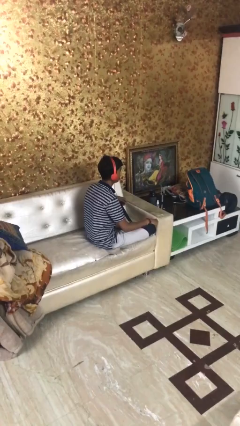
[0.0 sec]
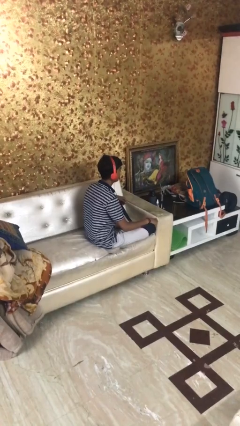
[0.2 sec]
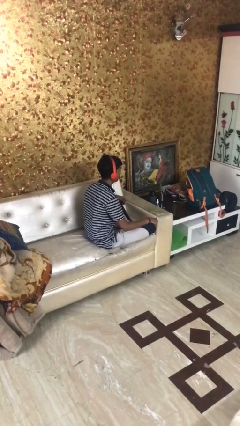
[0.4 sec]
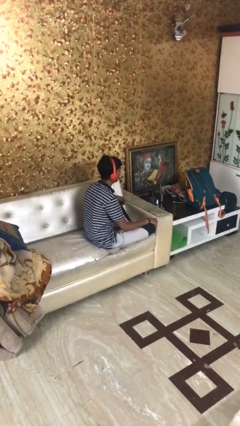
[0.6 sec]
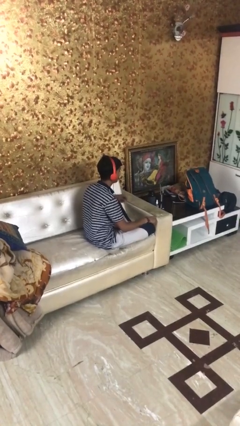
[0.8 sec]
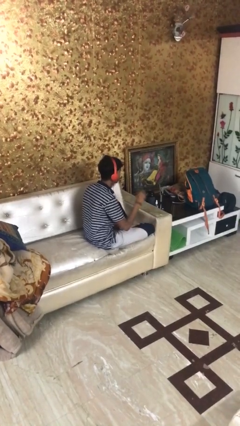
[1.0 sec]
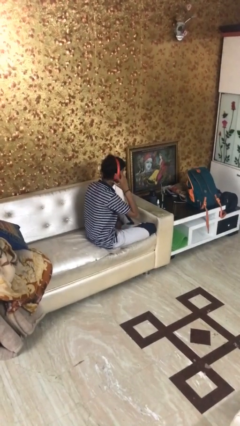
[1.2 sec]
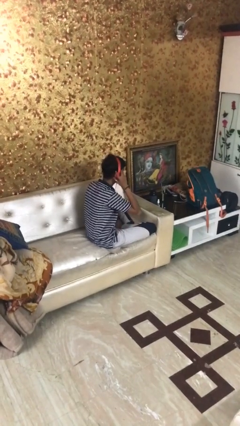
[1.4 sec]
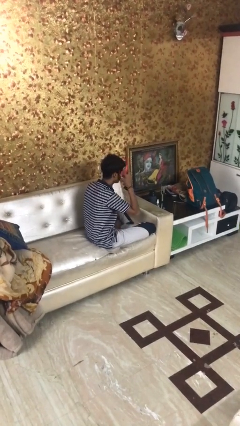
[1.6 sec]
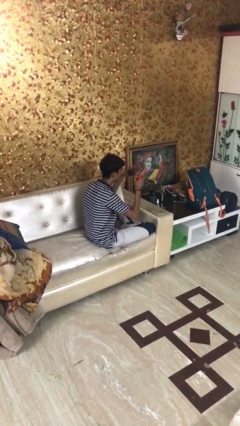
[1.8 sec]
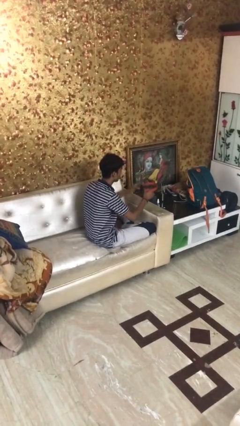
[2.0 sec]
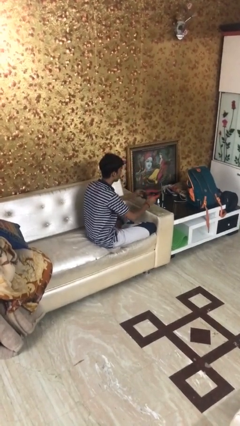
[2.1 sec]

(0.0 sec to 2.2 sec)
person takes off headphones

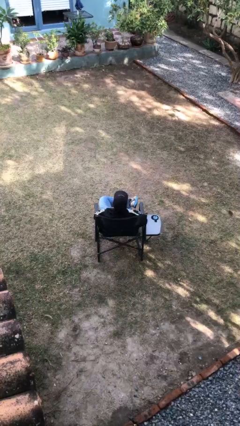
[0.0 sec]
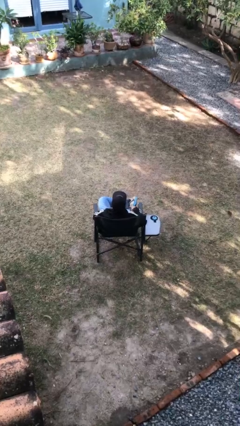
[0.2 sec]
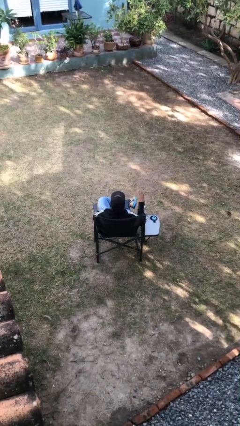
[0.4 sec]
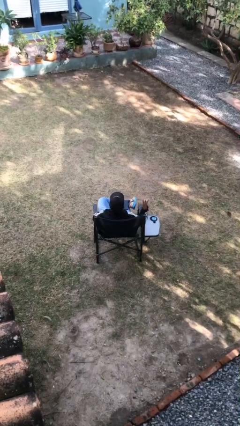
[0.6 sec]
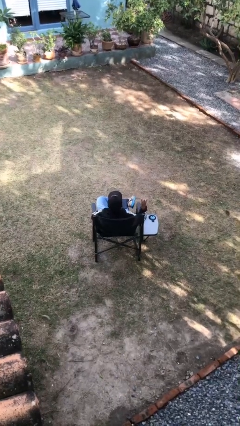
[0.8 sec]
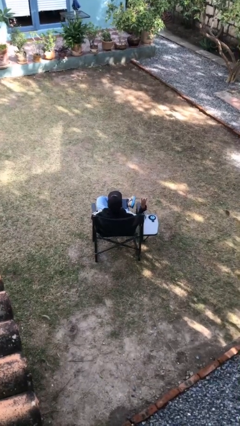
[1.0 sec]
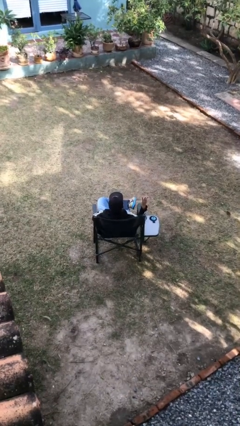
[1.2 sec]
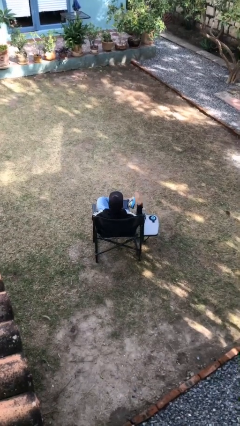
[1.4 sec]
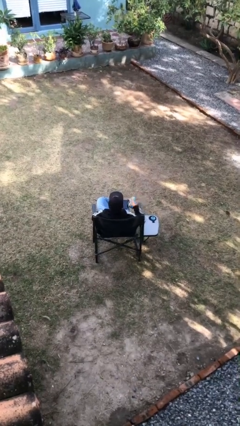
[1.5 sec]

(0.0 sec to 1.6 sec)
person gestures number three

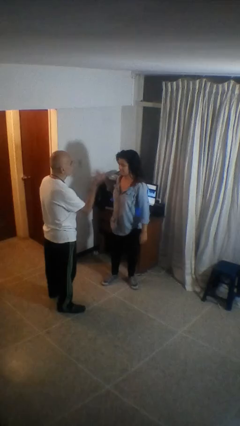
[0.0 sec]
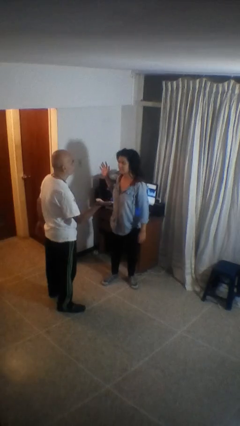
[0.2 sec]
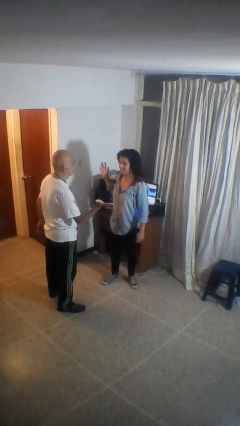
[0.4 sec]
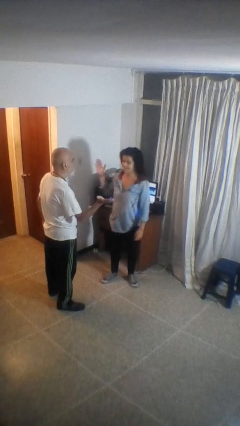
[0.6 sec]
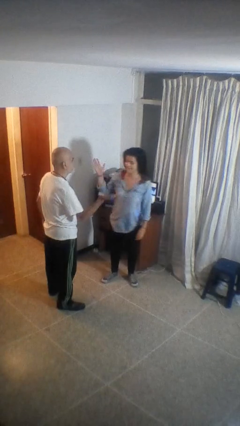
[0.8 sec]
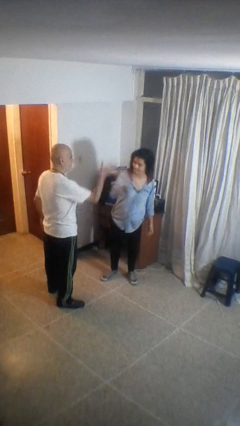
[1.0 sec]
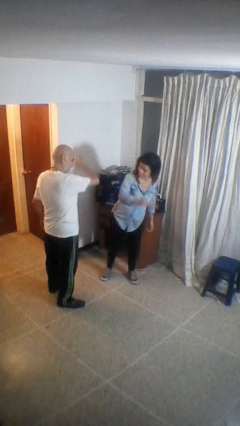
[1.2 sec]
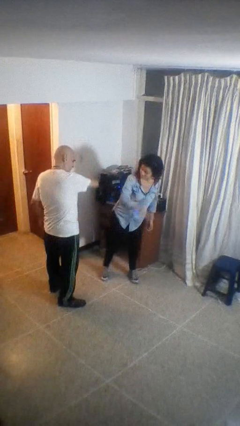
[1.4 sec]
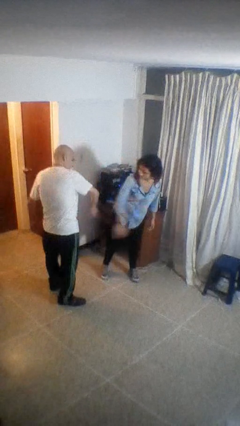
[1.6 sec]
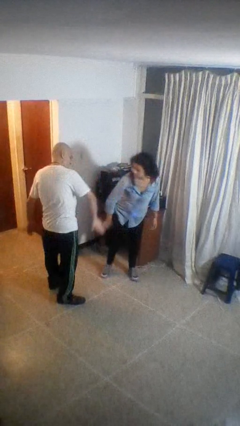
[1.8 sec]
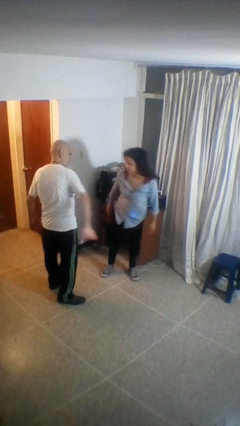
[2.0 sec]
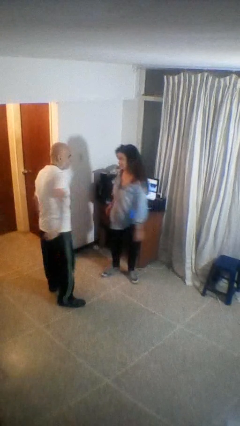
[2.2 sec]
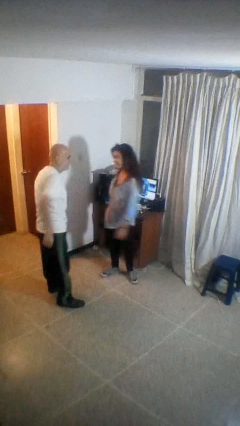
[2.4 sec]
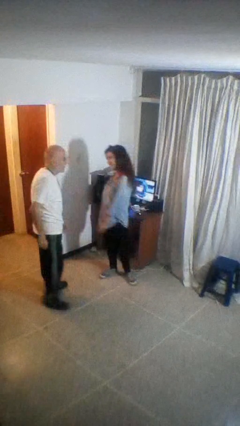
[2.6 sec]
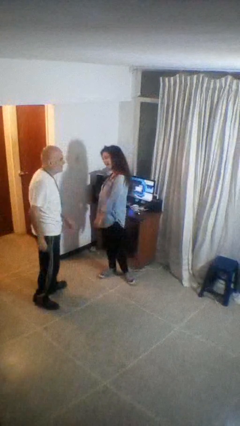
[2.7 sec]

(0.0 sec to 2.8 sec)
person highfives hand

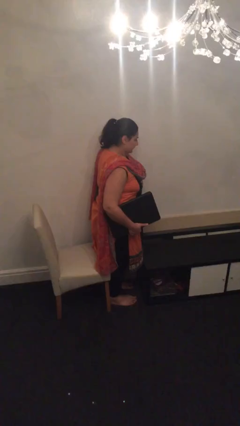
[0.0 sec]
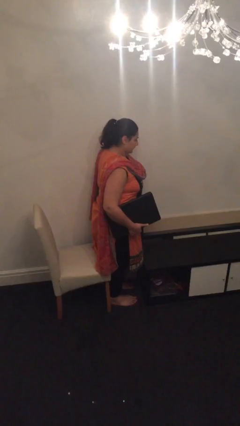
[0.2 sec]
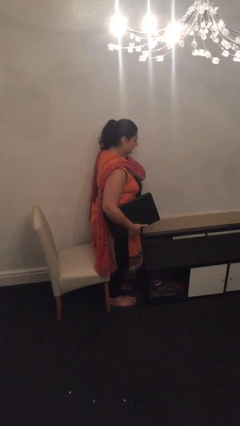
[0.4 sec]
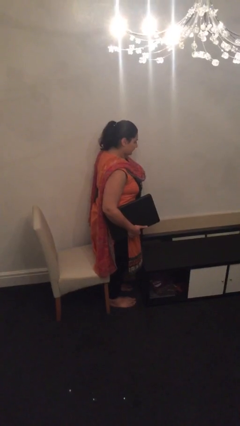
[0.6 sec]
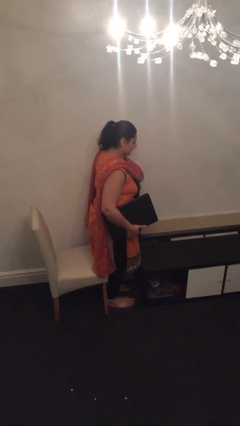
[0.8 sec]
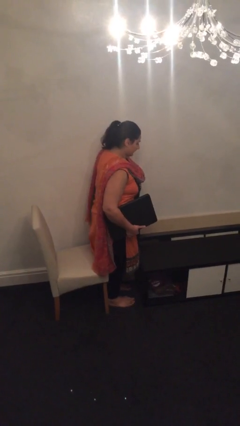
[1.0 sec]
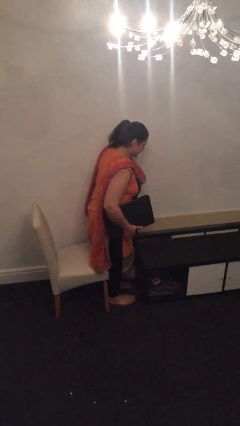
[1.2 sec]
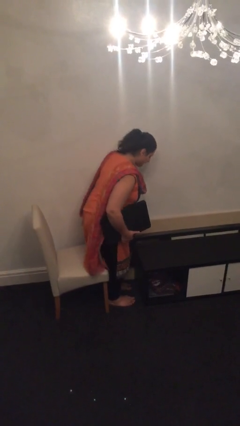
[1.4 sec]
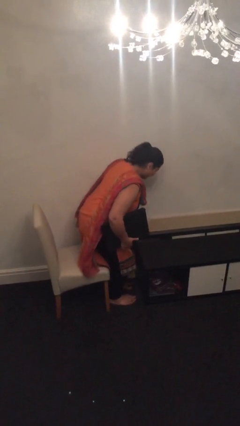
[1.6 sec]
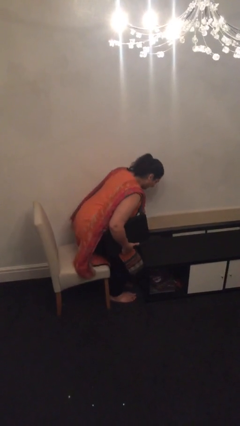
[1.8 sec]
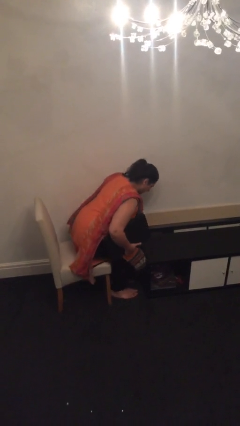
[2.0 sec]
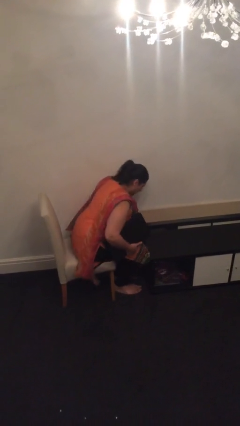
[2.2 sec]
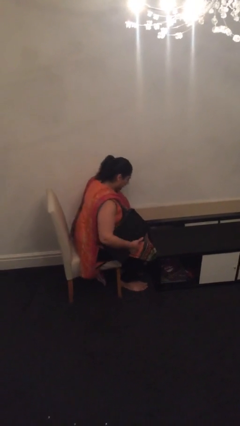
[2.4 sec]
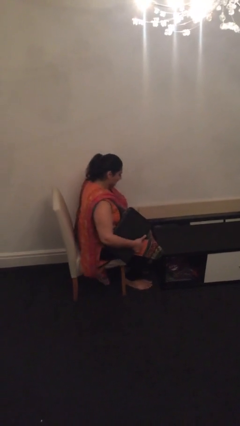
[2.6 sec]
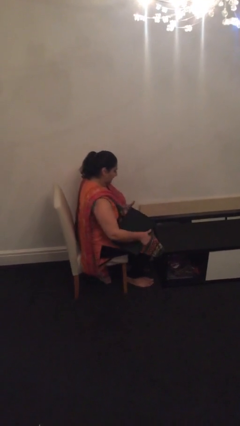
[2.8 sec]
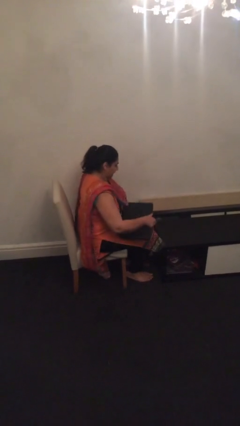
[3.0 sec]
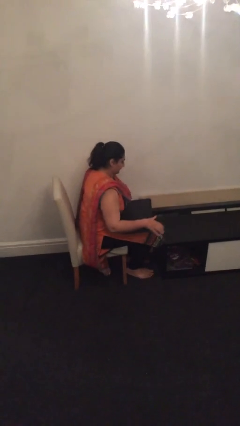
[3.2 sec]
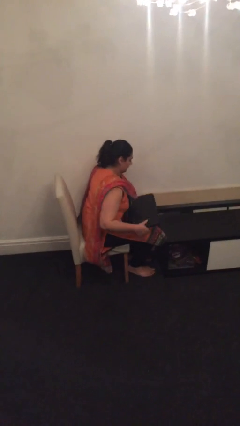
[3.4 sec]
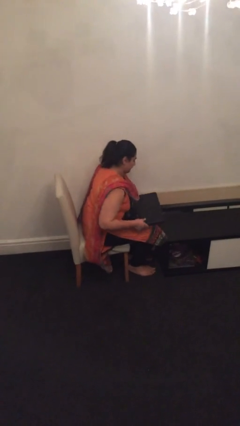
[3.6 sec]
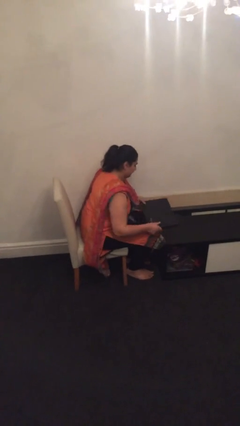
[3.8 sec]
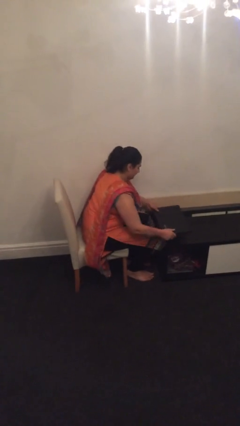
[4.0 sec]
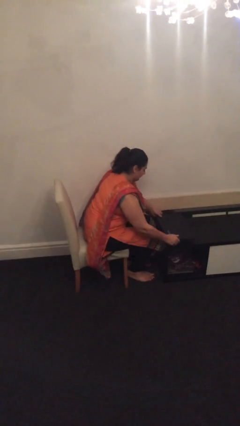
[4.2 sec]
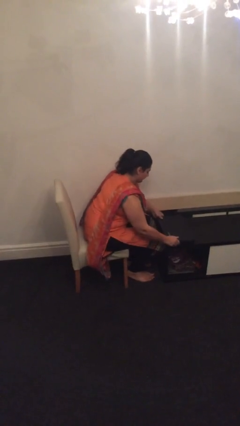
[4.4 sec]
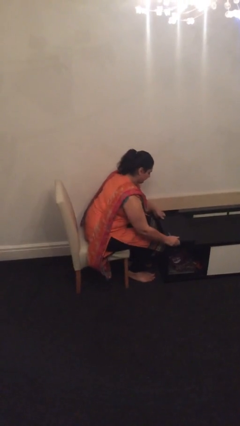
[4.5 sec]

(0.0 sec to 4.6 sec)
person sits down

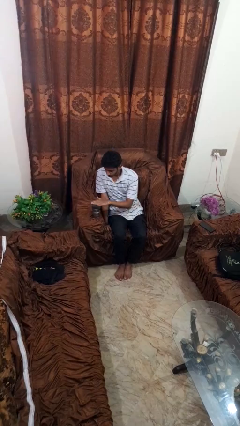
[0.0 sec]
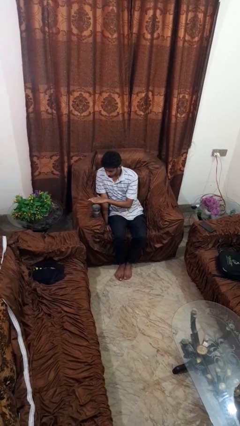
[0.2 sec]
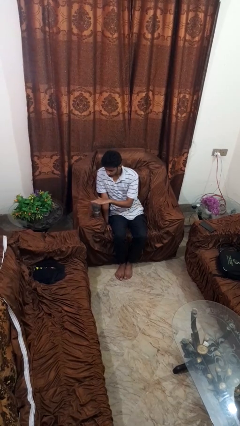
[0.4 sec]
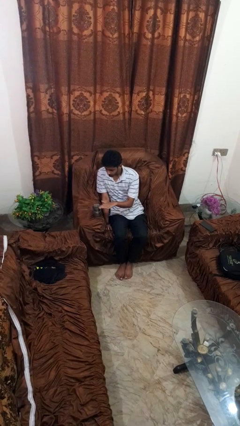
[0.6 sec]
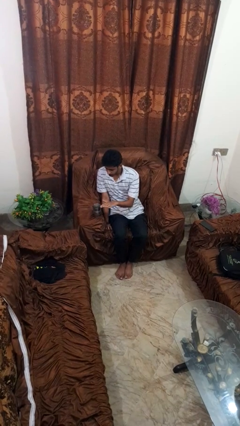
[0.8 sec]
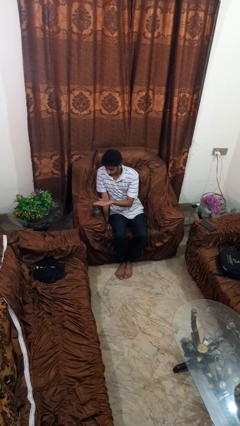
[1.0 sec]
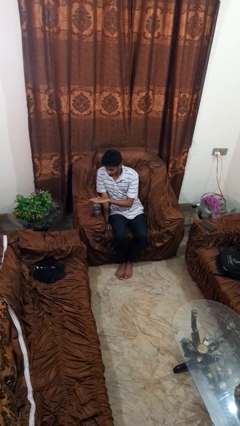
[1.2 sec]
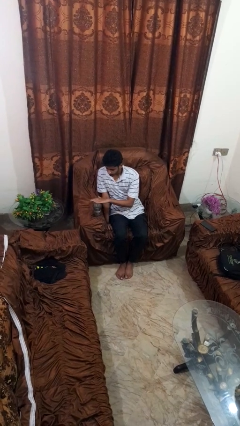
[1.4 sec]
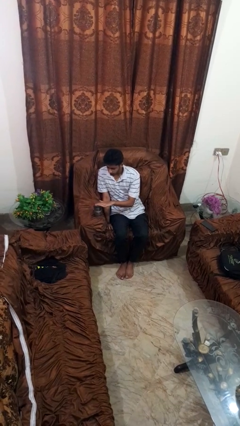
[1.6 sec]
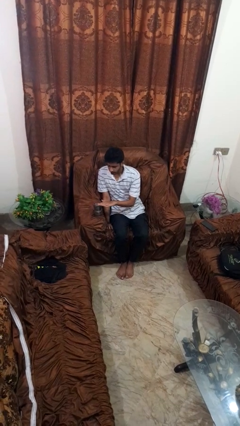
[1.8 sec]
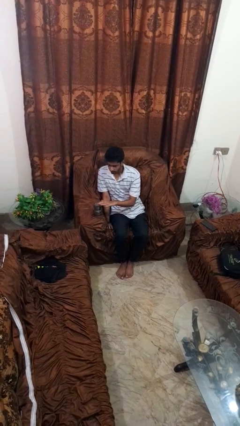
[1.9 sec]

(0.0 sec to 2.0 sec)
person waves hand over object

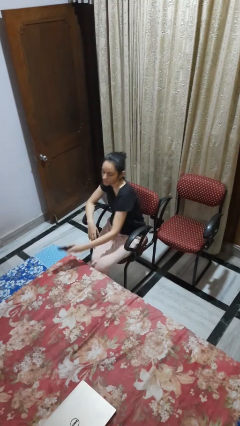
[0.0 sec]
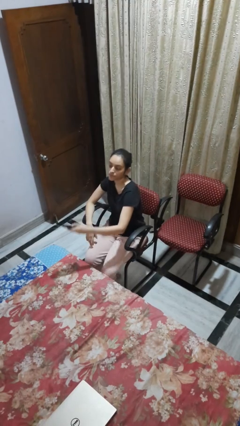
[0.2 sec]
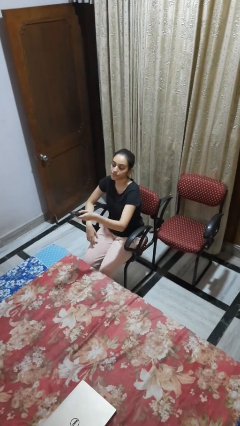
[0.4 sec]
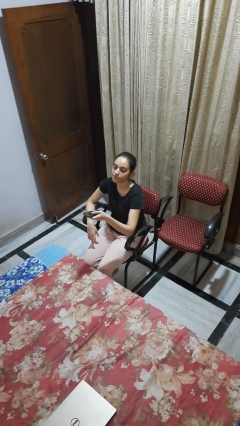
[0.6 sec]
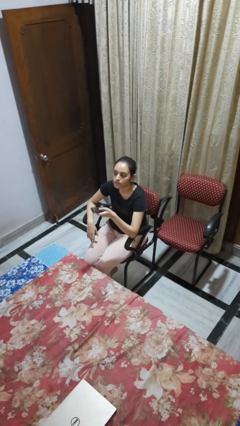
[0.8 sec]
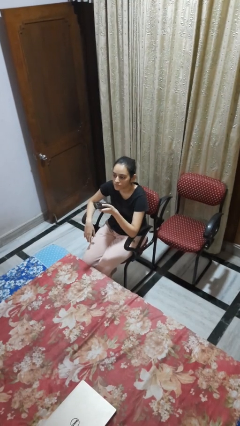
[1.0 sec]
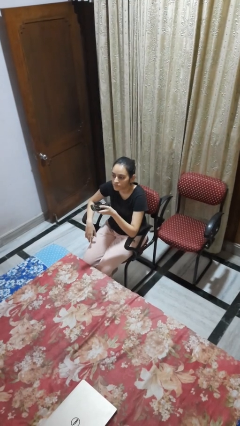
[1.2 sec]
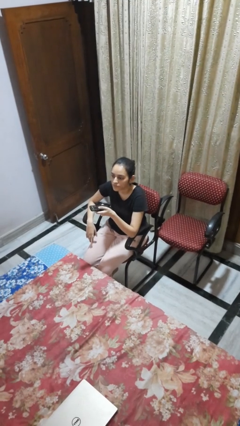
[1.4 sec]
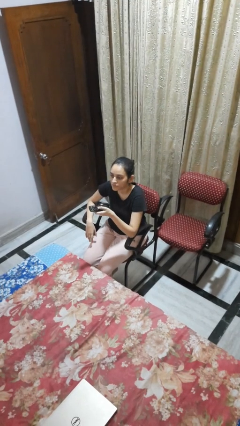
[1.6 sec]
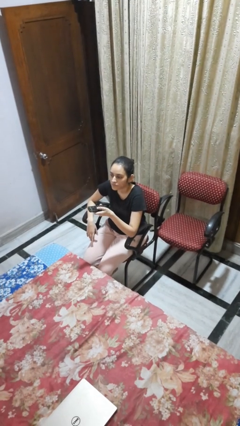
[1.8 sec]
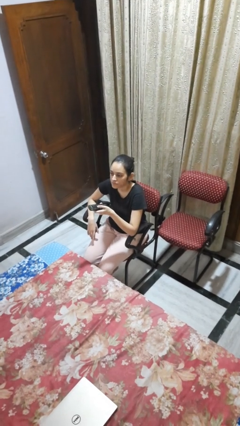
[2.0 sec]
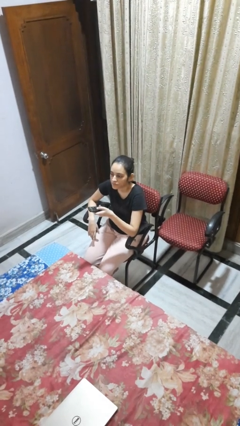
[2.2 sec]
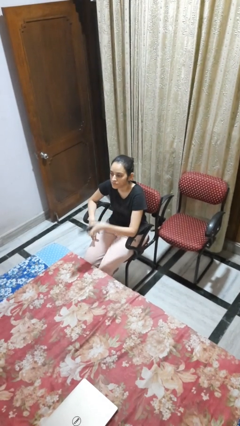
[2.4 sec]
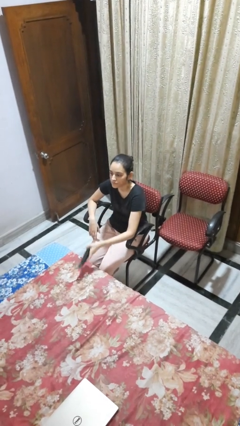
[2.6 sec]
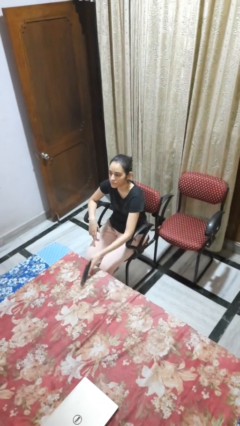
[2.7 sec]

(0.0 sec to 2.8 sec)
person uses television remote

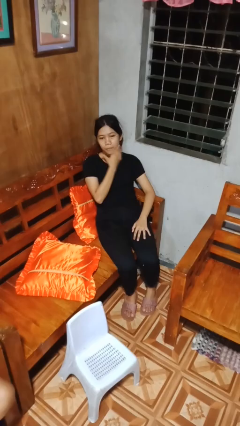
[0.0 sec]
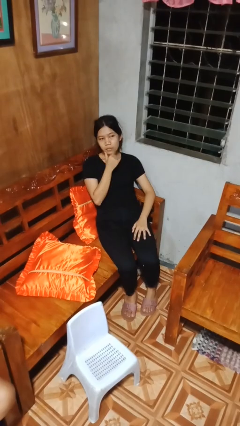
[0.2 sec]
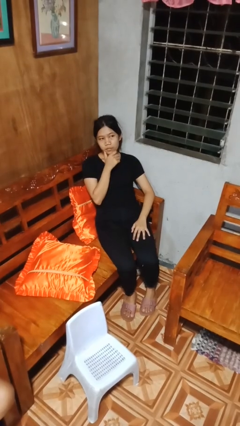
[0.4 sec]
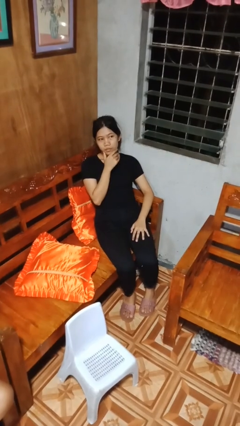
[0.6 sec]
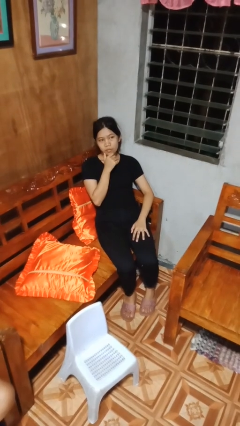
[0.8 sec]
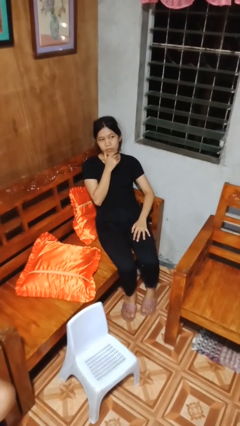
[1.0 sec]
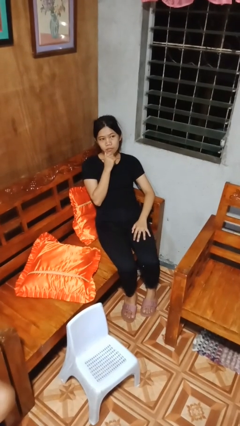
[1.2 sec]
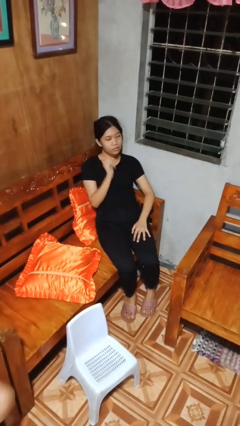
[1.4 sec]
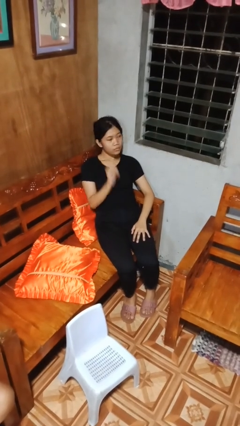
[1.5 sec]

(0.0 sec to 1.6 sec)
person strokes chin
